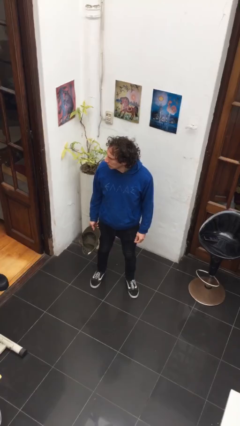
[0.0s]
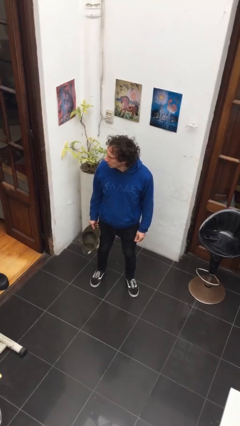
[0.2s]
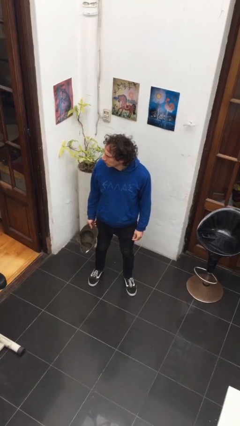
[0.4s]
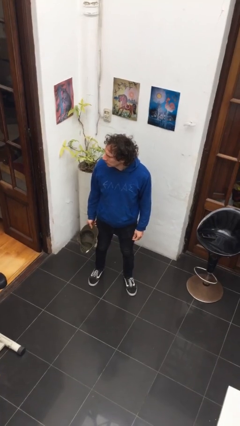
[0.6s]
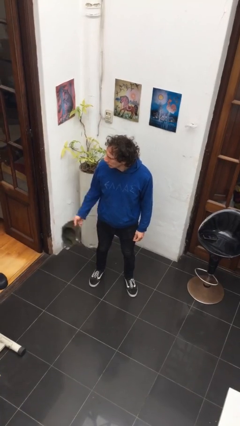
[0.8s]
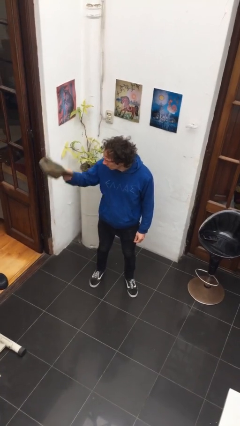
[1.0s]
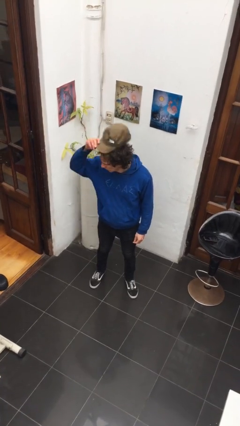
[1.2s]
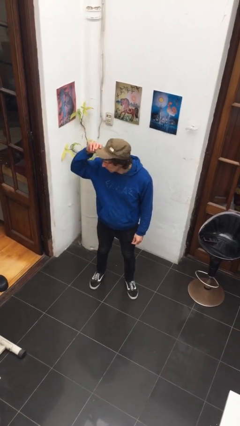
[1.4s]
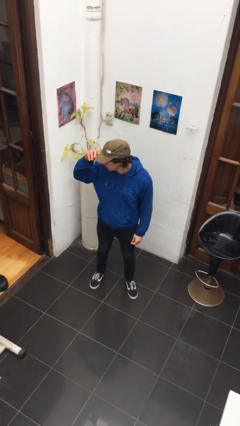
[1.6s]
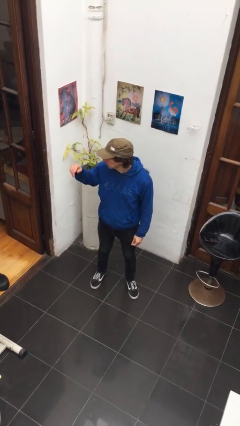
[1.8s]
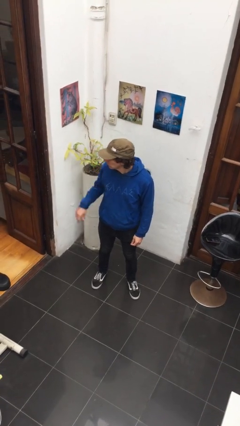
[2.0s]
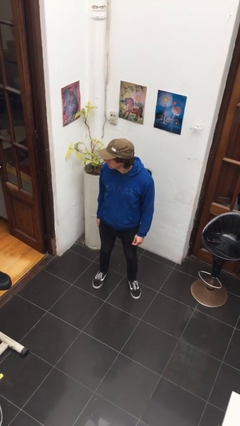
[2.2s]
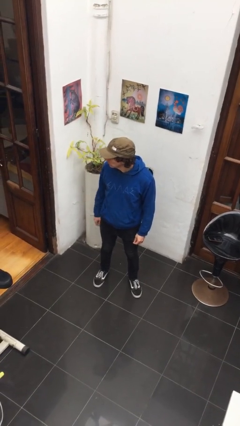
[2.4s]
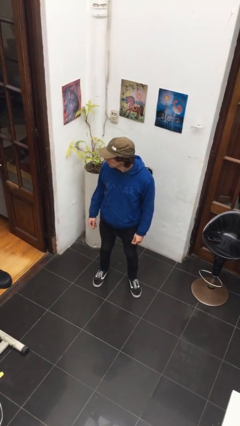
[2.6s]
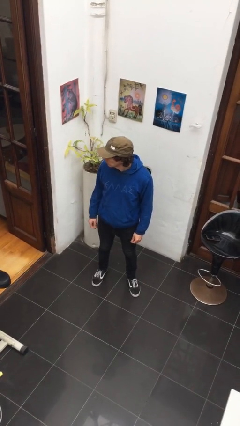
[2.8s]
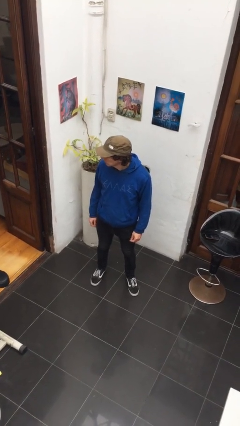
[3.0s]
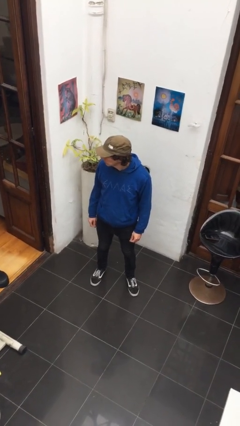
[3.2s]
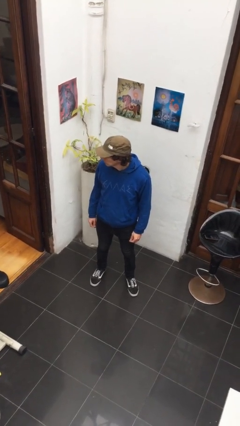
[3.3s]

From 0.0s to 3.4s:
person puts on hat

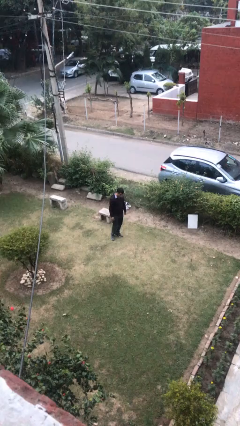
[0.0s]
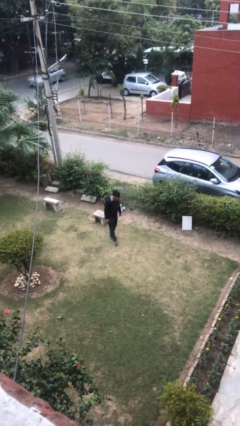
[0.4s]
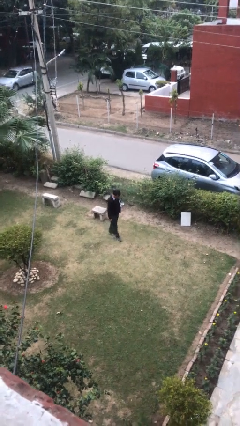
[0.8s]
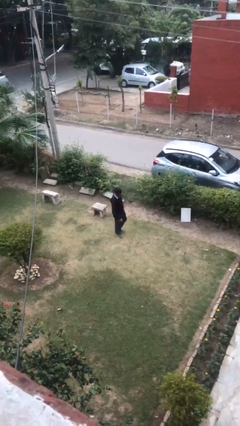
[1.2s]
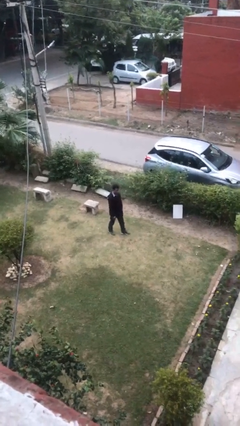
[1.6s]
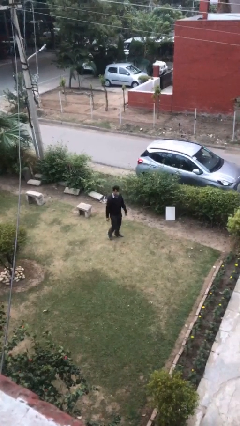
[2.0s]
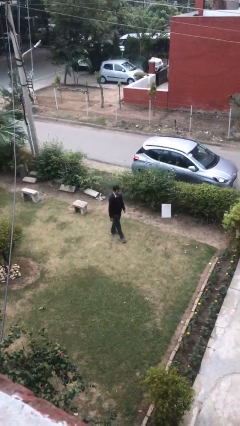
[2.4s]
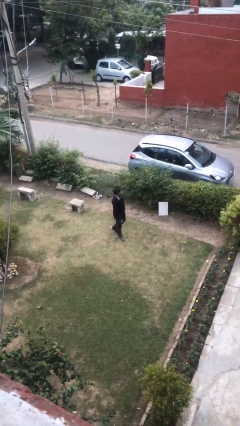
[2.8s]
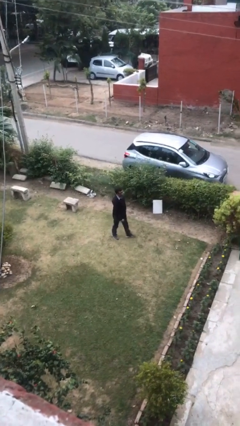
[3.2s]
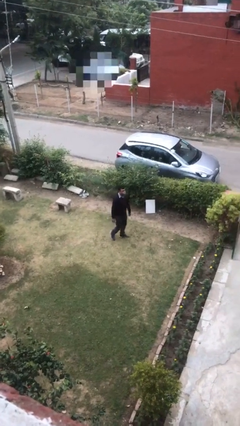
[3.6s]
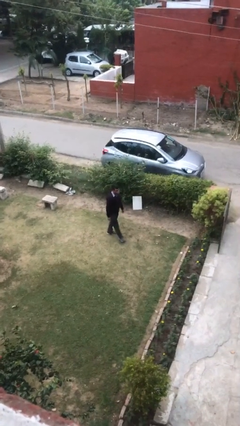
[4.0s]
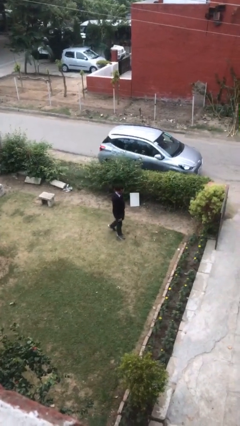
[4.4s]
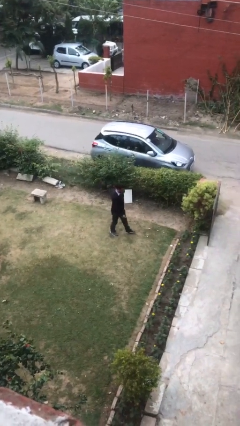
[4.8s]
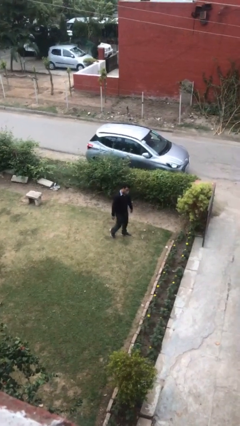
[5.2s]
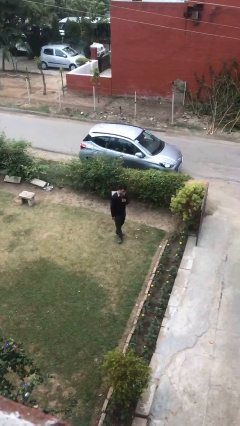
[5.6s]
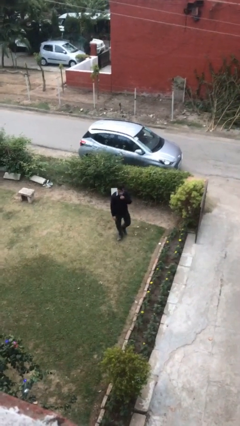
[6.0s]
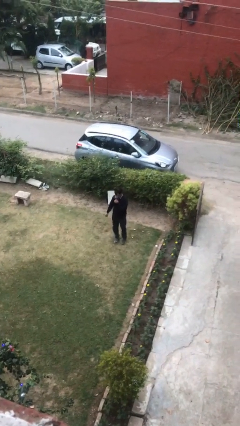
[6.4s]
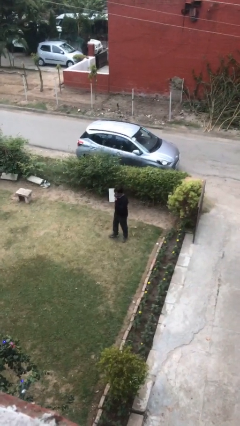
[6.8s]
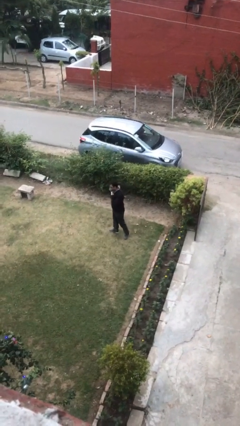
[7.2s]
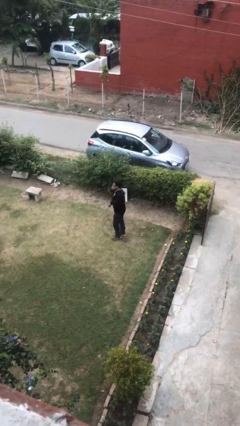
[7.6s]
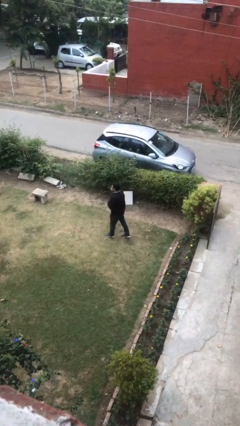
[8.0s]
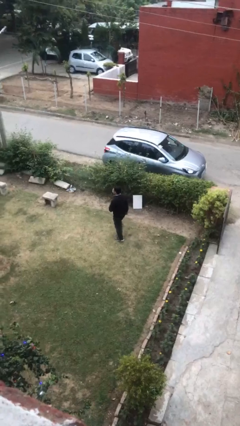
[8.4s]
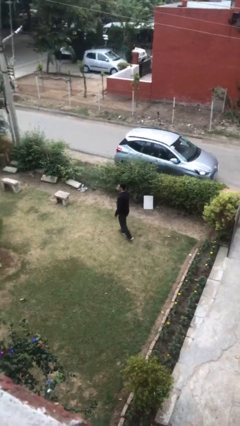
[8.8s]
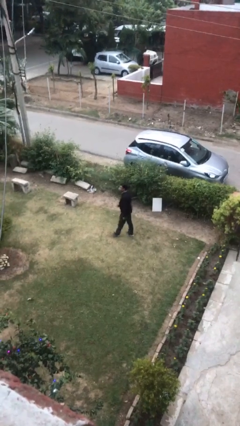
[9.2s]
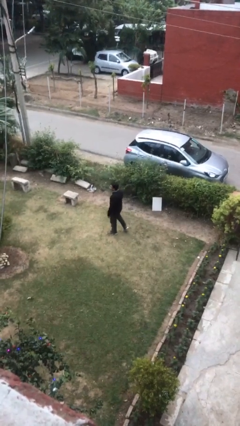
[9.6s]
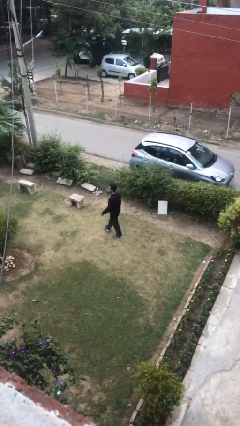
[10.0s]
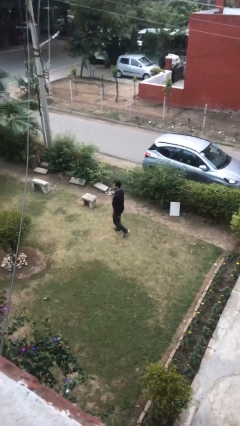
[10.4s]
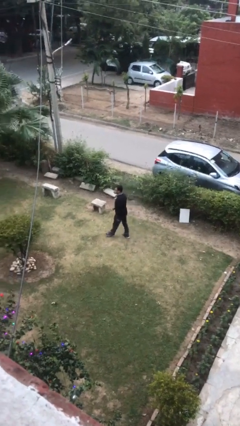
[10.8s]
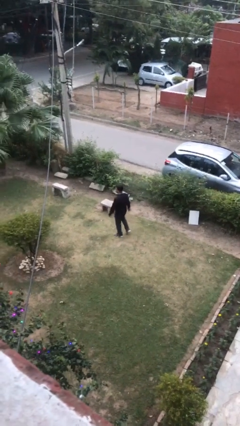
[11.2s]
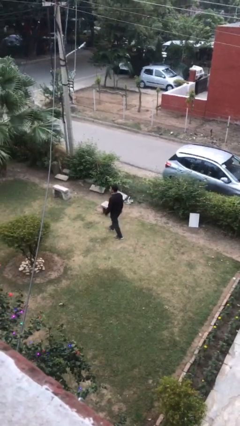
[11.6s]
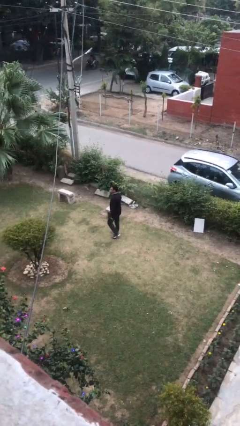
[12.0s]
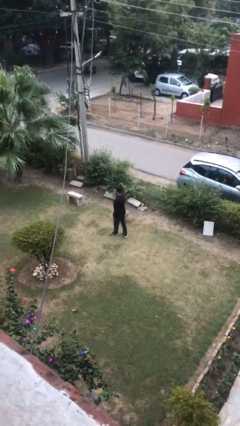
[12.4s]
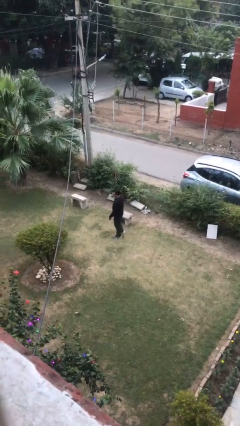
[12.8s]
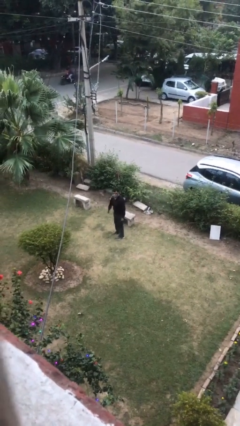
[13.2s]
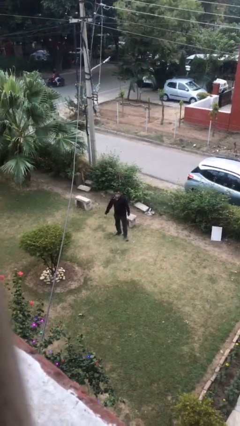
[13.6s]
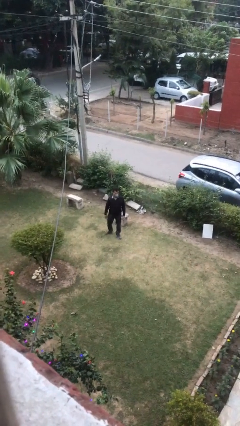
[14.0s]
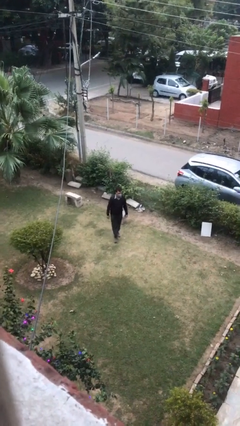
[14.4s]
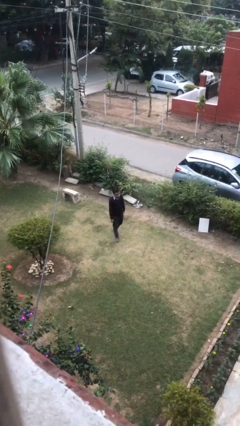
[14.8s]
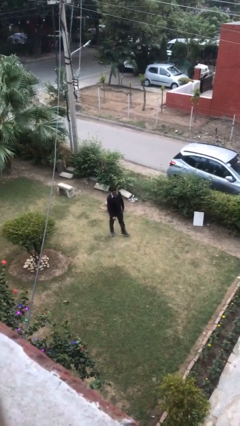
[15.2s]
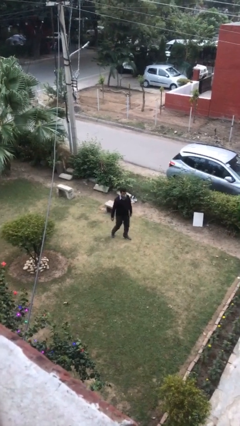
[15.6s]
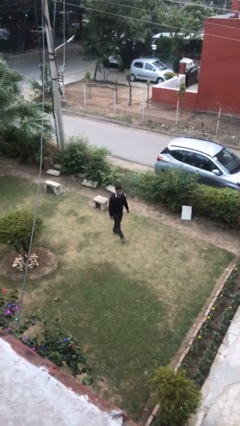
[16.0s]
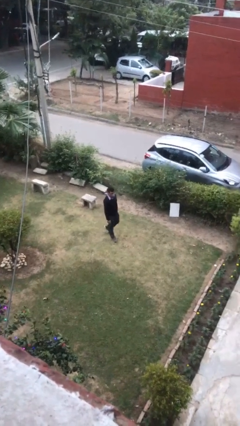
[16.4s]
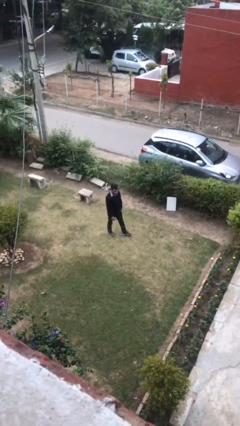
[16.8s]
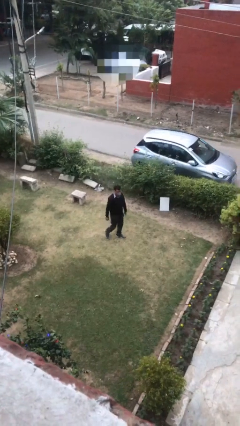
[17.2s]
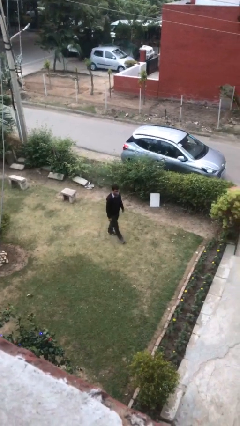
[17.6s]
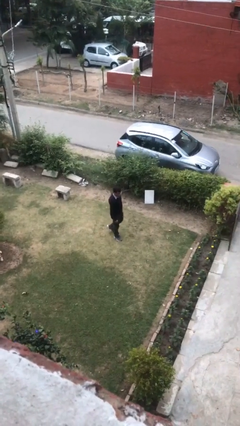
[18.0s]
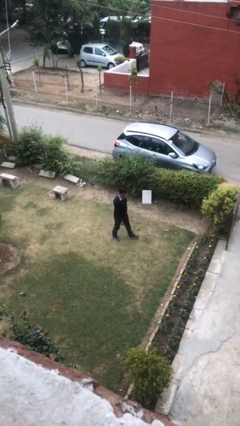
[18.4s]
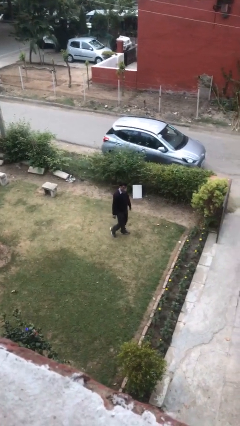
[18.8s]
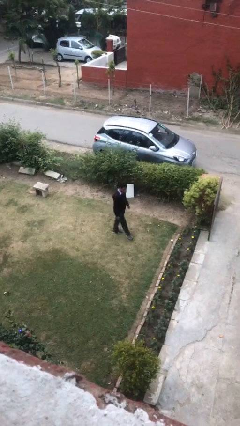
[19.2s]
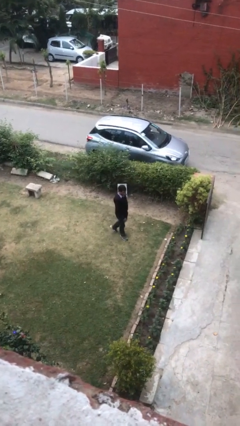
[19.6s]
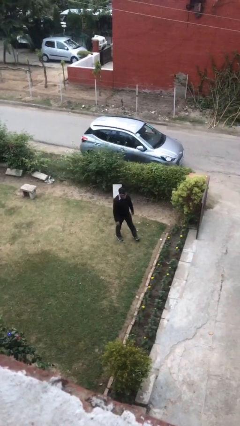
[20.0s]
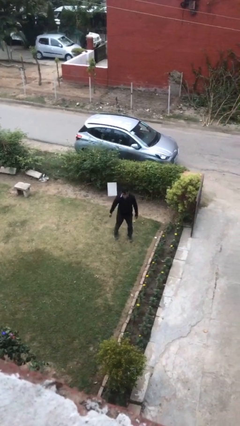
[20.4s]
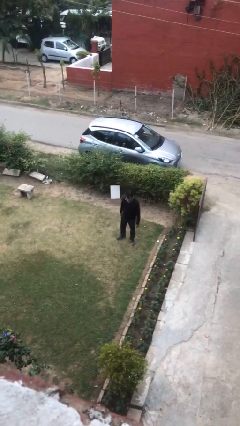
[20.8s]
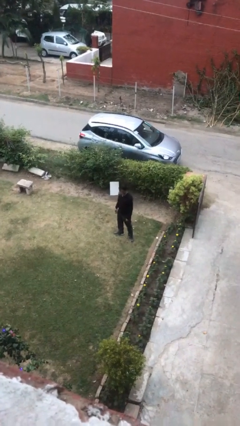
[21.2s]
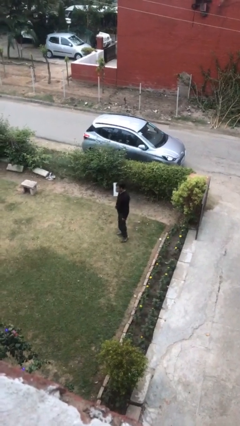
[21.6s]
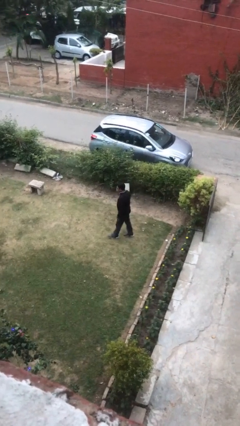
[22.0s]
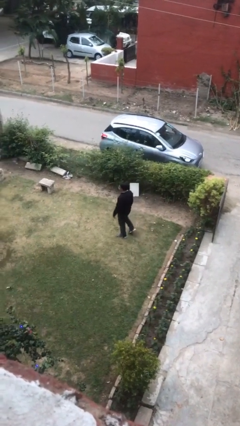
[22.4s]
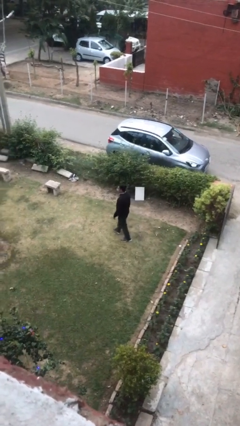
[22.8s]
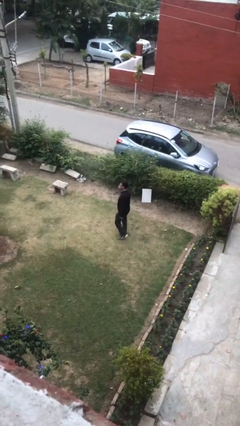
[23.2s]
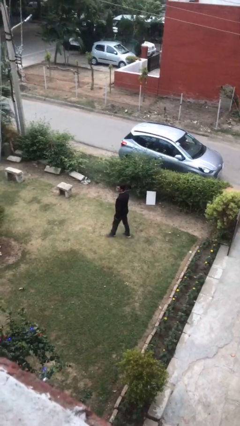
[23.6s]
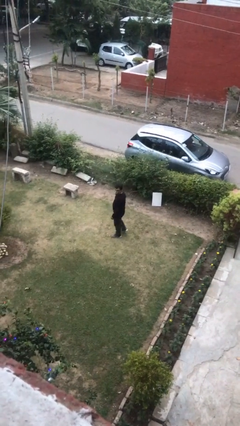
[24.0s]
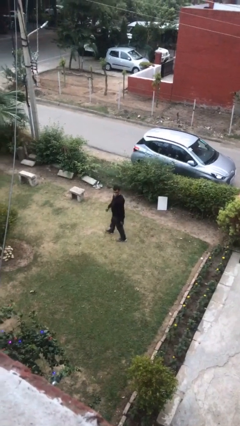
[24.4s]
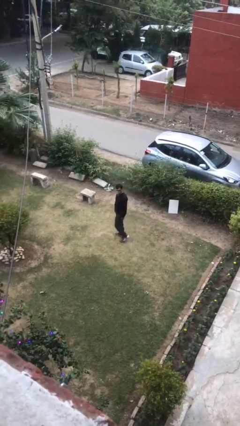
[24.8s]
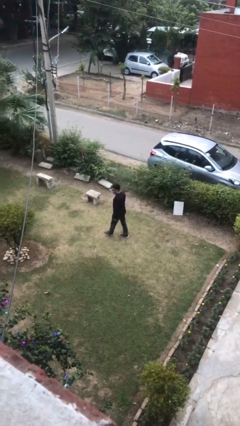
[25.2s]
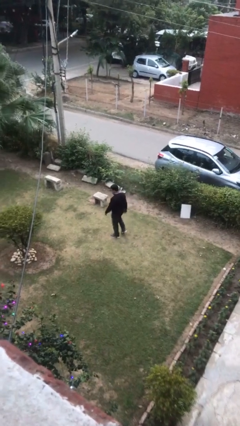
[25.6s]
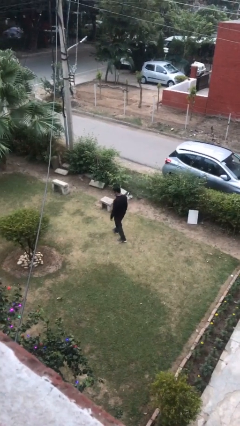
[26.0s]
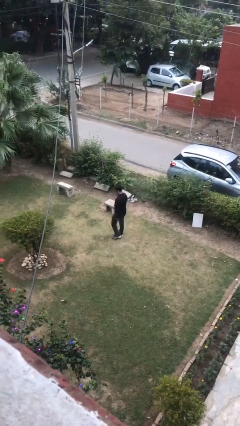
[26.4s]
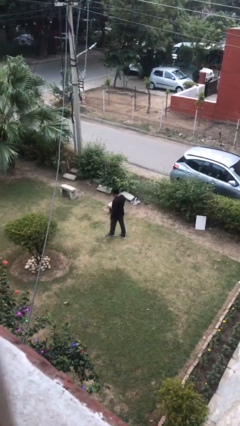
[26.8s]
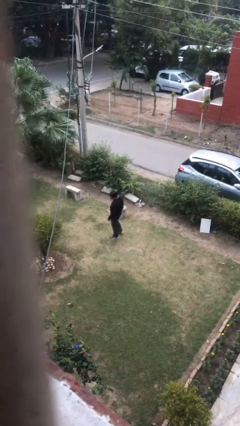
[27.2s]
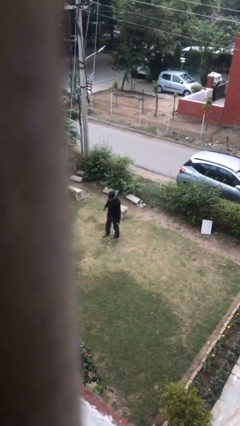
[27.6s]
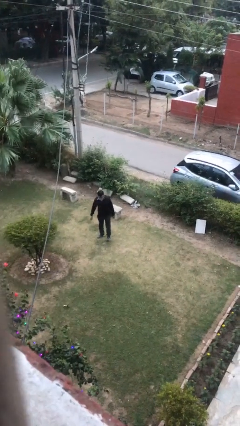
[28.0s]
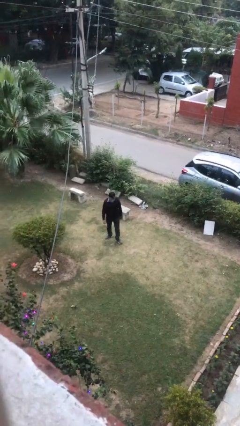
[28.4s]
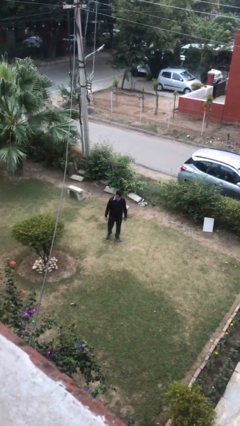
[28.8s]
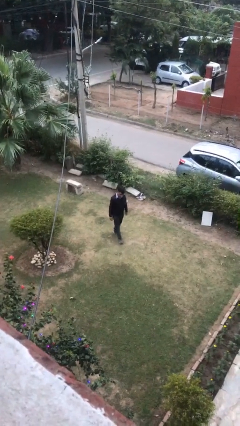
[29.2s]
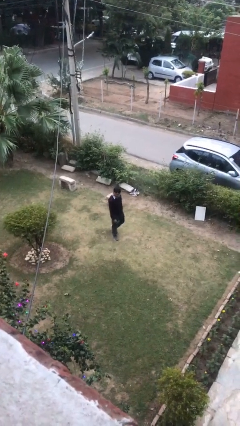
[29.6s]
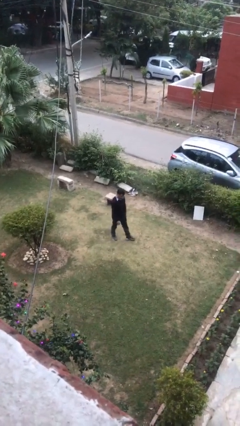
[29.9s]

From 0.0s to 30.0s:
person walks
